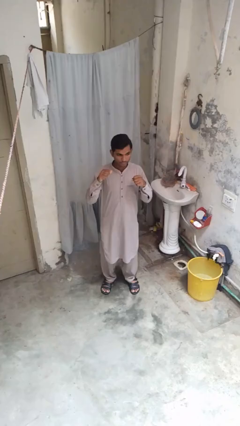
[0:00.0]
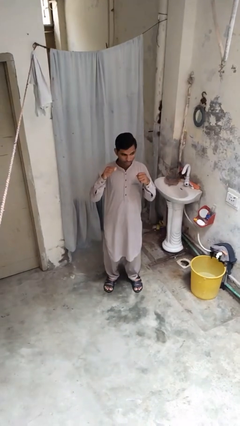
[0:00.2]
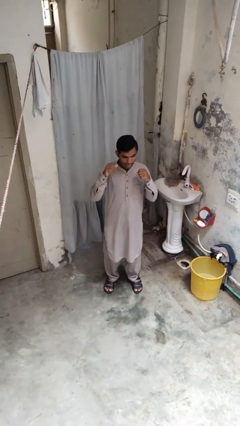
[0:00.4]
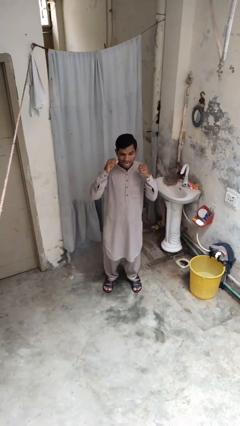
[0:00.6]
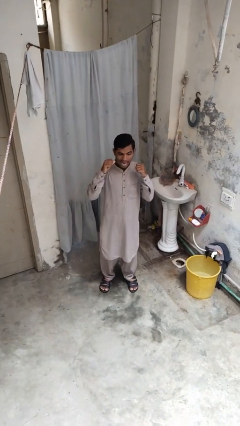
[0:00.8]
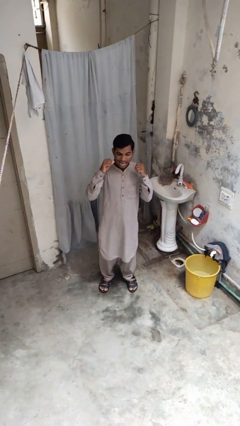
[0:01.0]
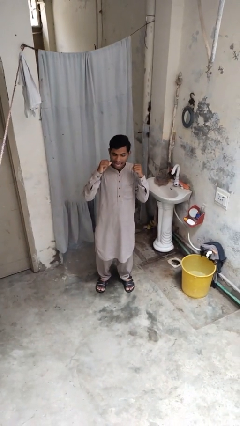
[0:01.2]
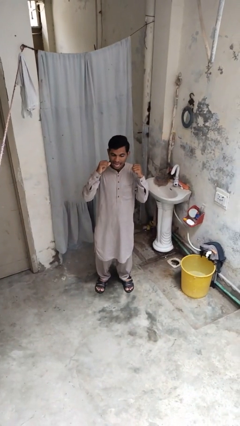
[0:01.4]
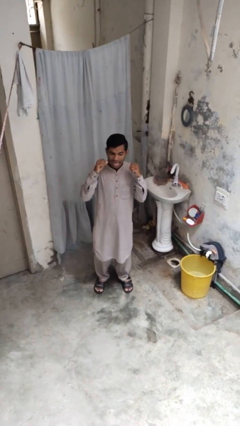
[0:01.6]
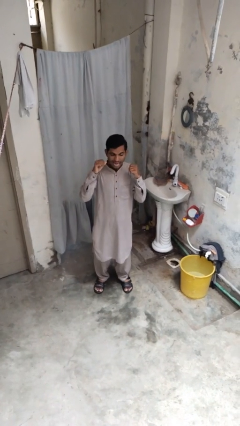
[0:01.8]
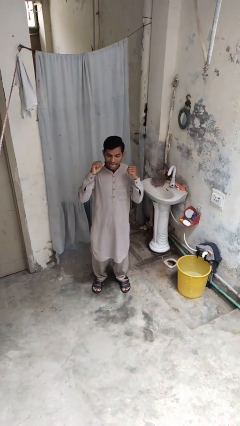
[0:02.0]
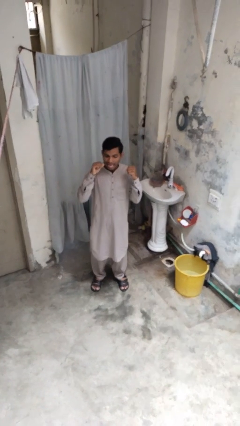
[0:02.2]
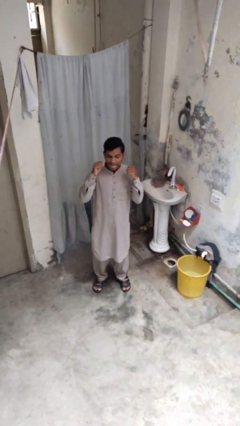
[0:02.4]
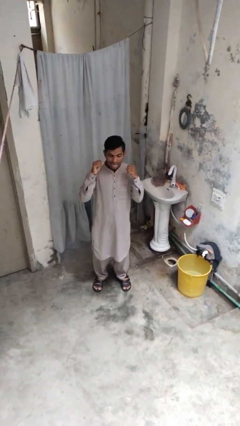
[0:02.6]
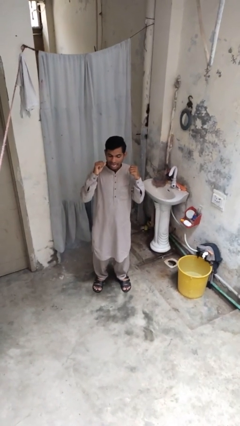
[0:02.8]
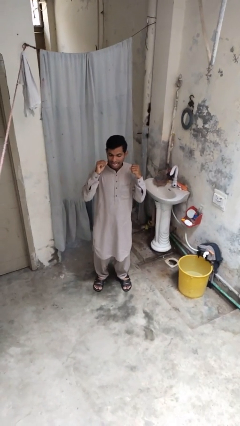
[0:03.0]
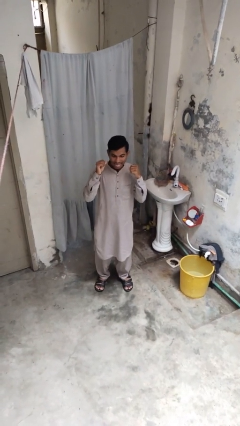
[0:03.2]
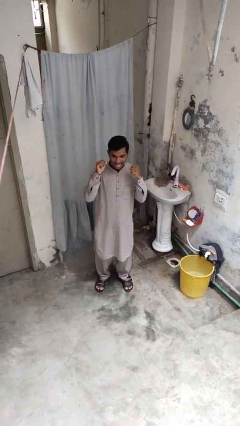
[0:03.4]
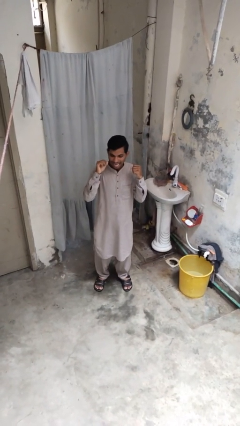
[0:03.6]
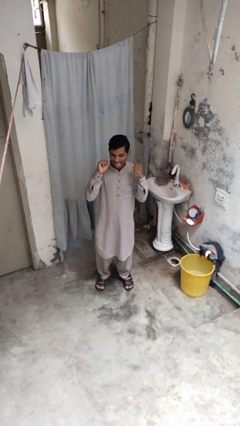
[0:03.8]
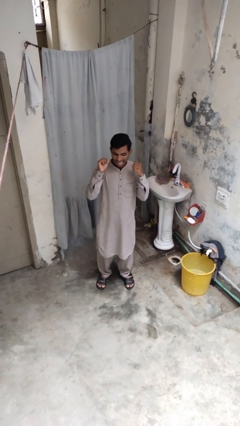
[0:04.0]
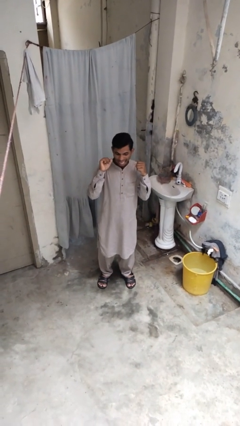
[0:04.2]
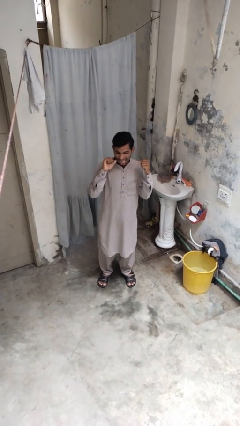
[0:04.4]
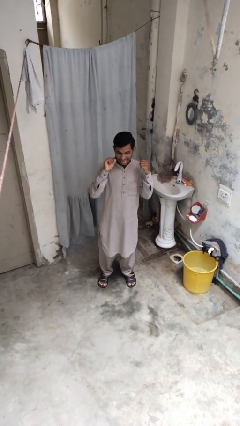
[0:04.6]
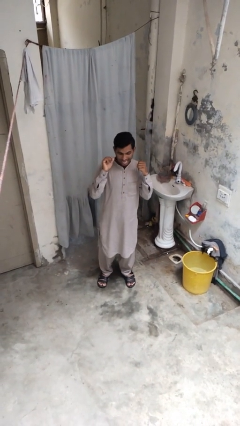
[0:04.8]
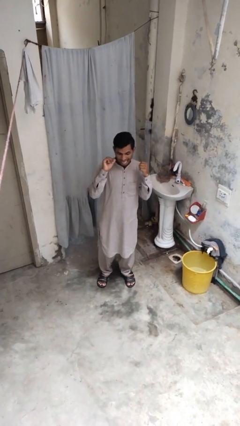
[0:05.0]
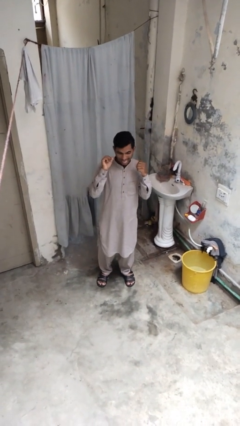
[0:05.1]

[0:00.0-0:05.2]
person flosses

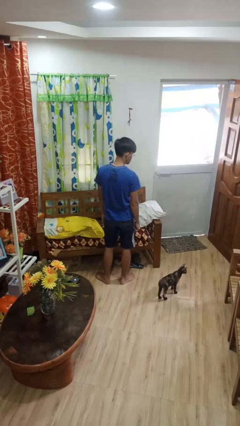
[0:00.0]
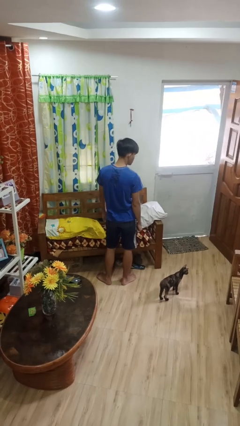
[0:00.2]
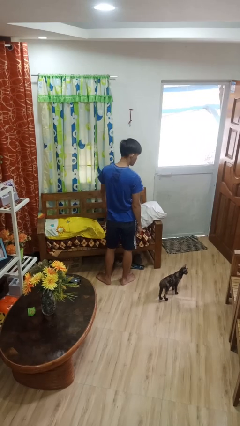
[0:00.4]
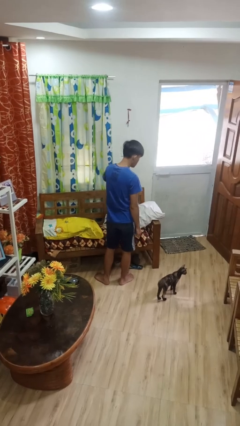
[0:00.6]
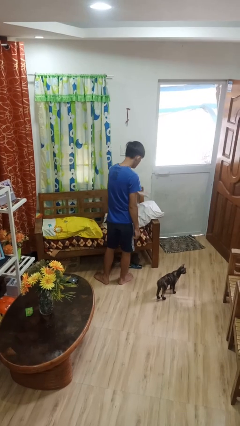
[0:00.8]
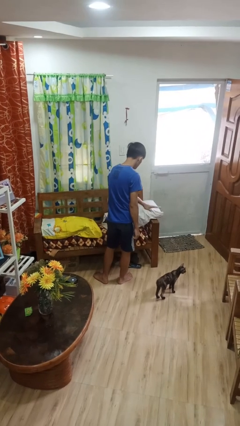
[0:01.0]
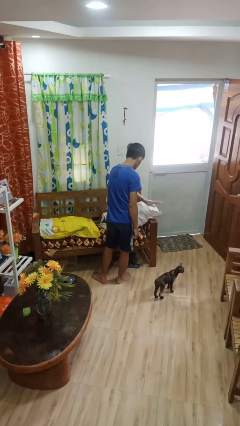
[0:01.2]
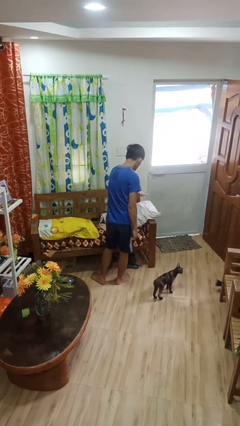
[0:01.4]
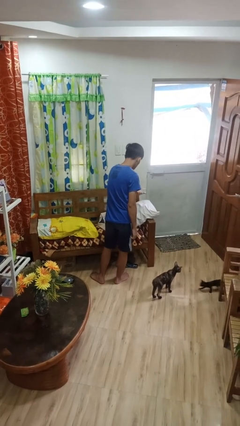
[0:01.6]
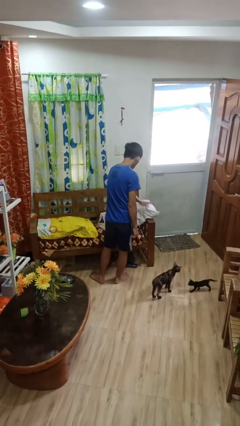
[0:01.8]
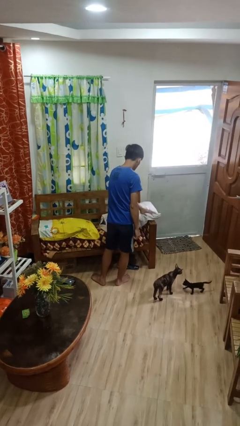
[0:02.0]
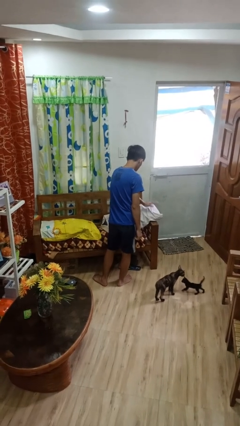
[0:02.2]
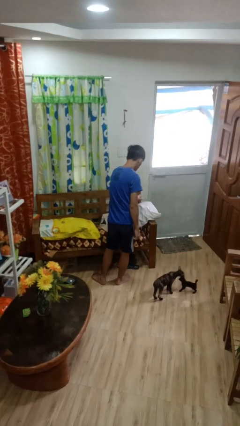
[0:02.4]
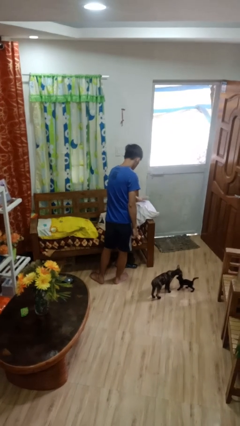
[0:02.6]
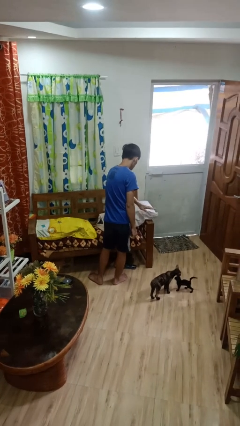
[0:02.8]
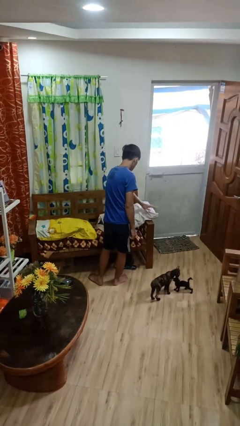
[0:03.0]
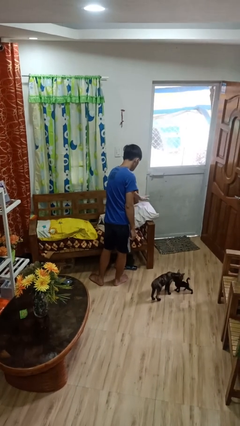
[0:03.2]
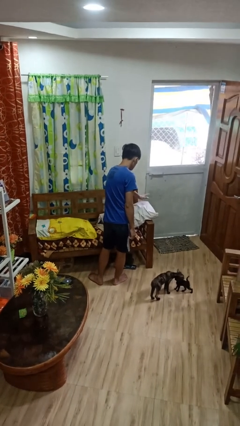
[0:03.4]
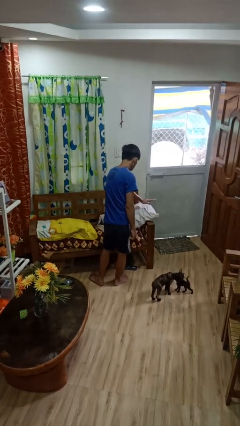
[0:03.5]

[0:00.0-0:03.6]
person waves hand over object

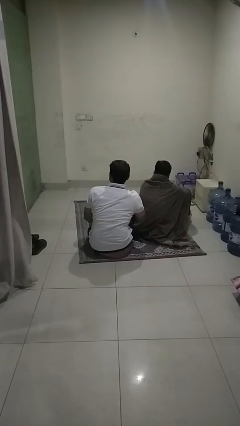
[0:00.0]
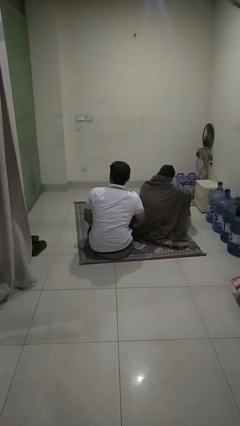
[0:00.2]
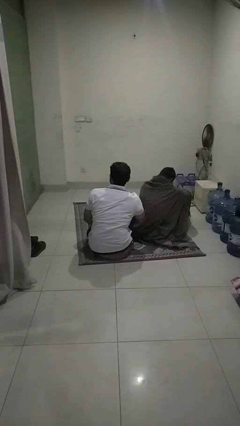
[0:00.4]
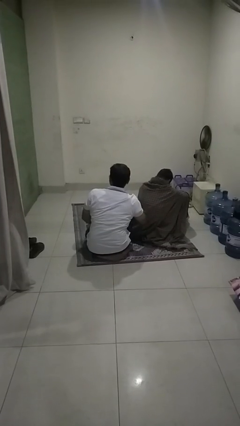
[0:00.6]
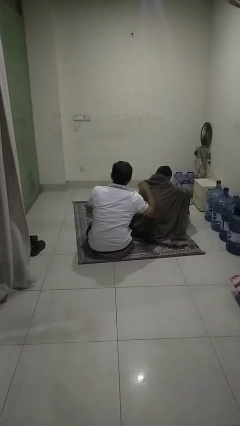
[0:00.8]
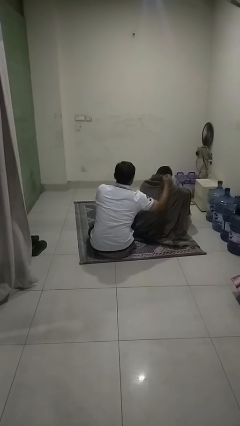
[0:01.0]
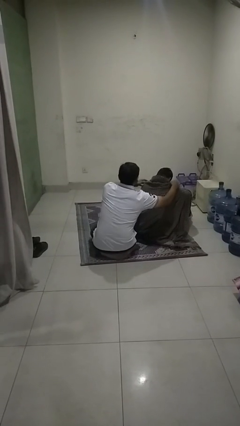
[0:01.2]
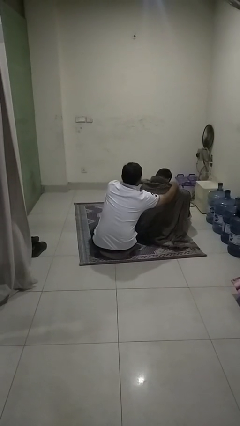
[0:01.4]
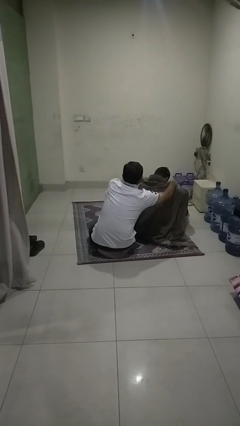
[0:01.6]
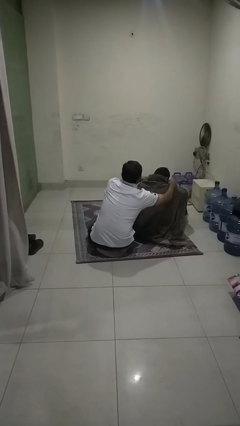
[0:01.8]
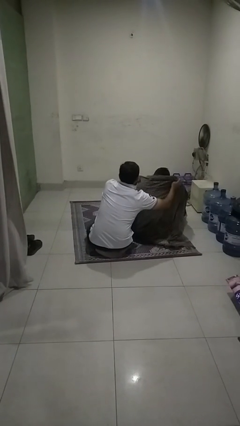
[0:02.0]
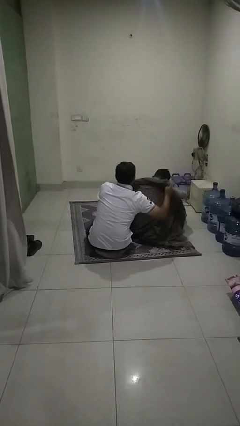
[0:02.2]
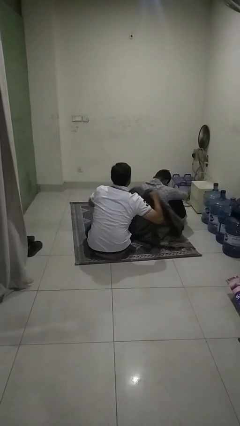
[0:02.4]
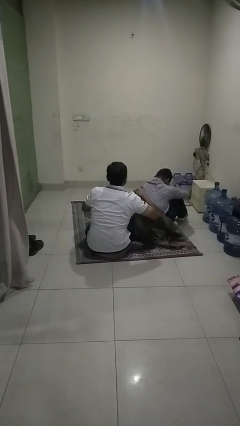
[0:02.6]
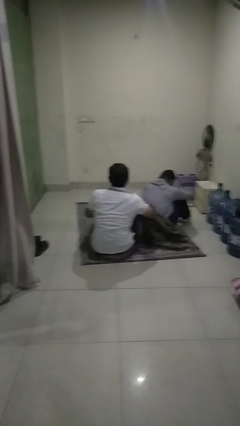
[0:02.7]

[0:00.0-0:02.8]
person uncovers friend with blanket

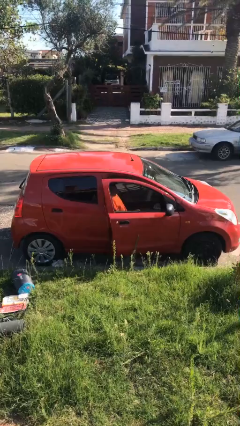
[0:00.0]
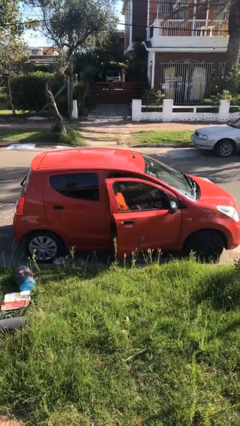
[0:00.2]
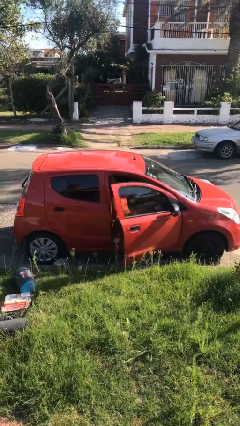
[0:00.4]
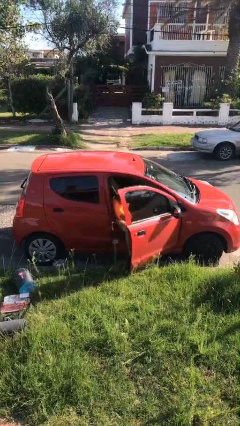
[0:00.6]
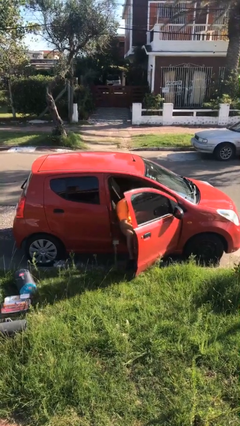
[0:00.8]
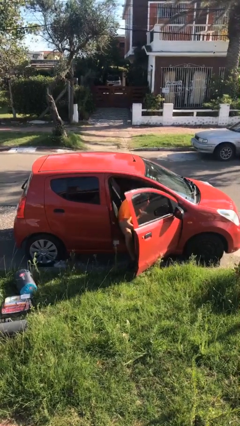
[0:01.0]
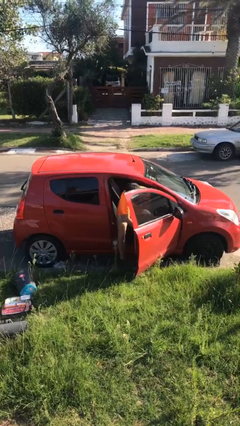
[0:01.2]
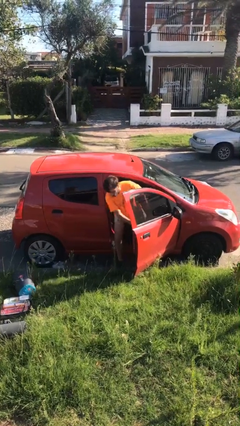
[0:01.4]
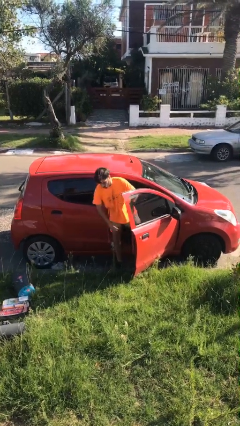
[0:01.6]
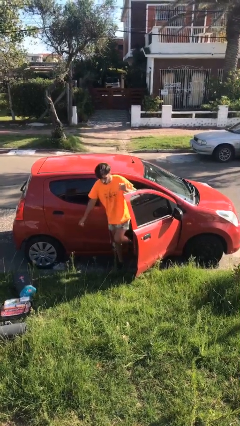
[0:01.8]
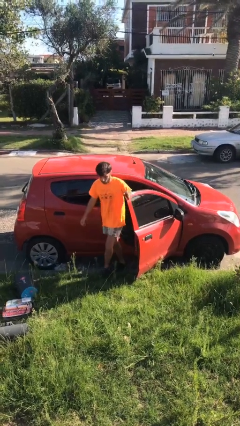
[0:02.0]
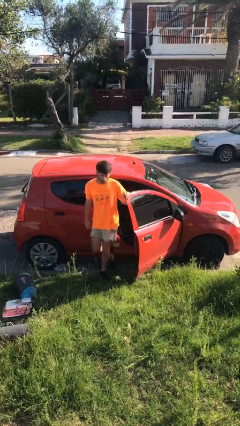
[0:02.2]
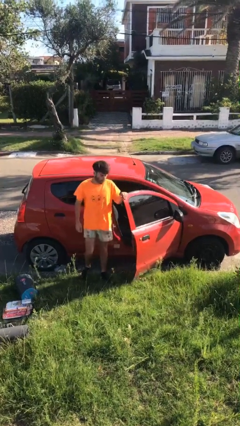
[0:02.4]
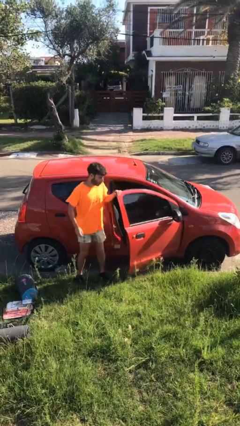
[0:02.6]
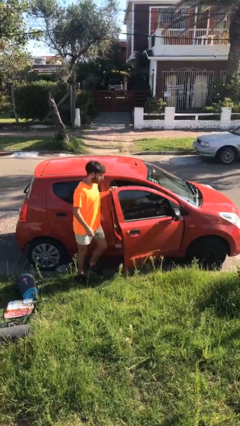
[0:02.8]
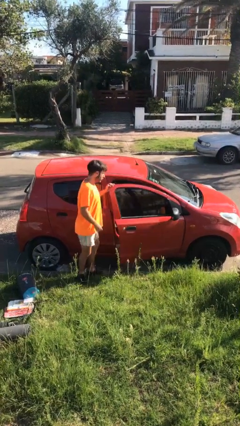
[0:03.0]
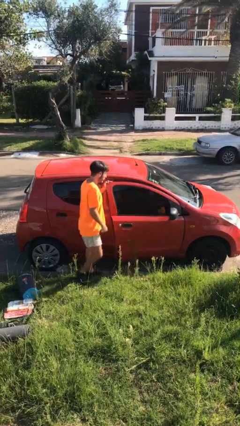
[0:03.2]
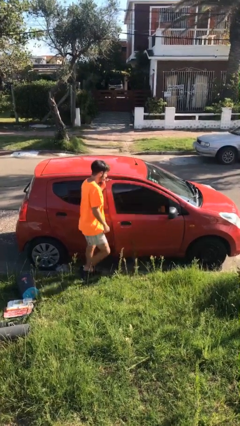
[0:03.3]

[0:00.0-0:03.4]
car drops off person

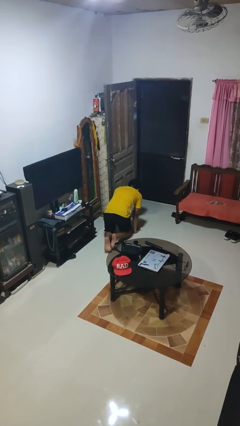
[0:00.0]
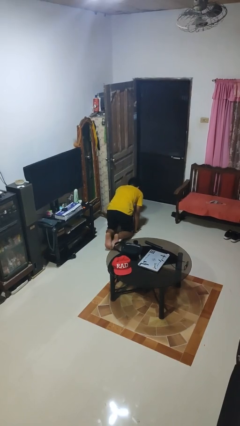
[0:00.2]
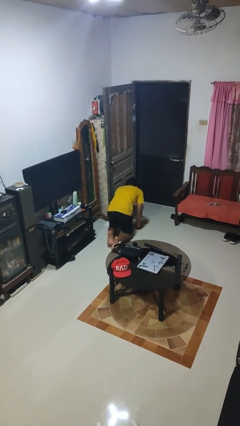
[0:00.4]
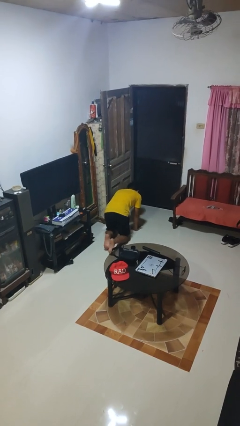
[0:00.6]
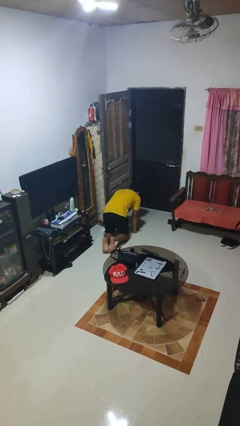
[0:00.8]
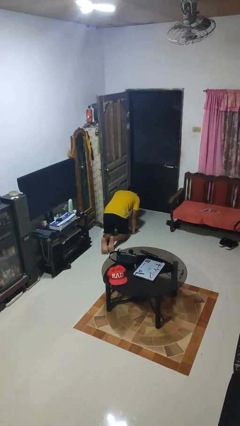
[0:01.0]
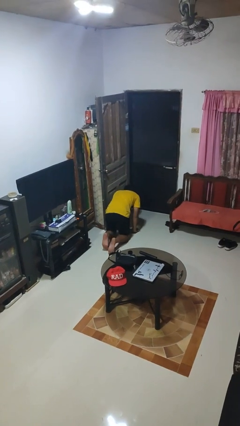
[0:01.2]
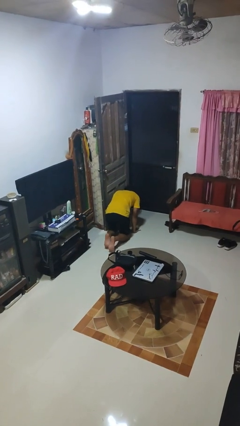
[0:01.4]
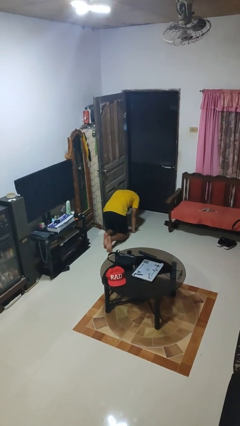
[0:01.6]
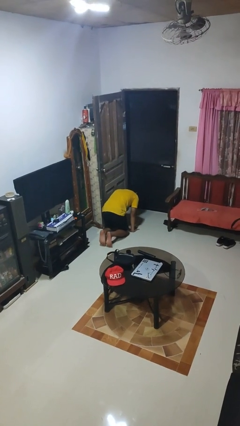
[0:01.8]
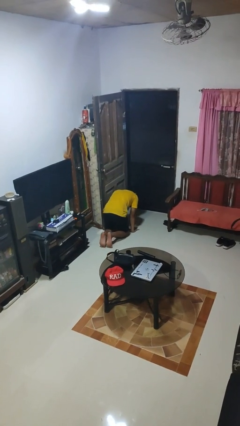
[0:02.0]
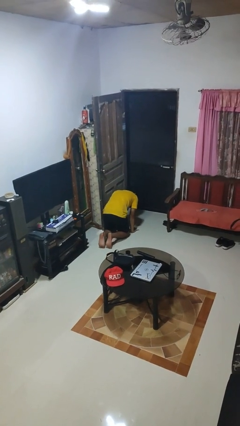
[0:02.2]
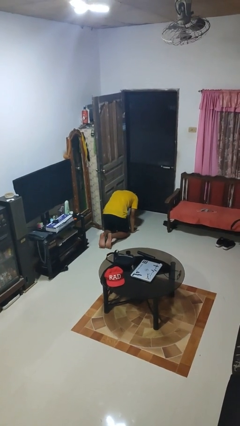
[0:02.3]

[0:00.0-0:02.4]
person crawls
